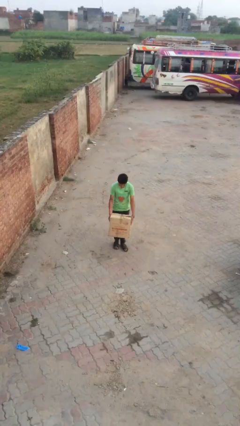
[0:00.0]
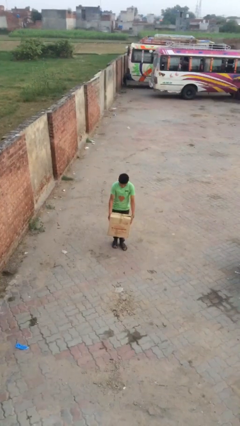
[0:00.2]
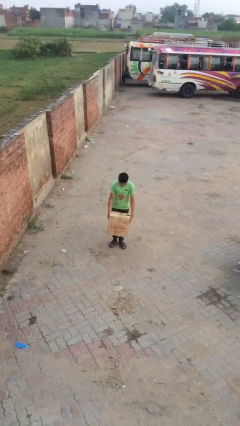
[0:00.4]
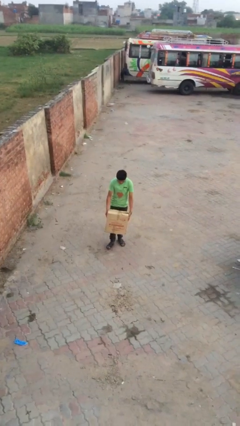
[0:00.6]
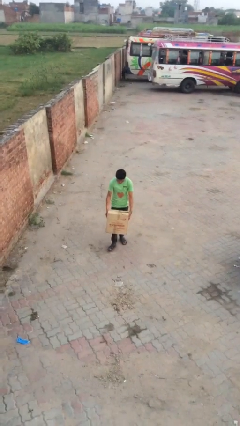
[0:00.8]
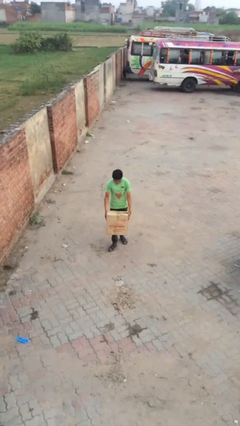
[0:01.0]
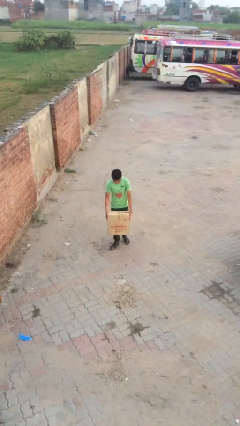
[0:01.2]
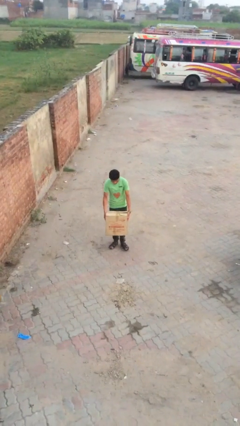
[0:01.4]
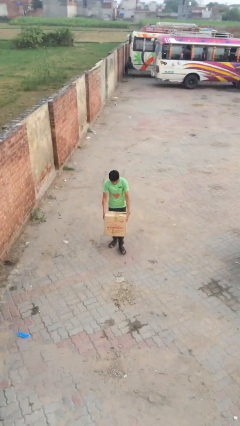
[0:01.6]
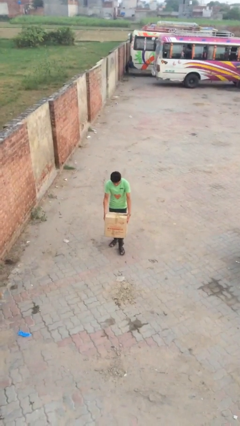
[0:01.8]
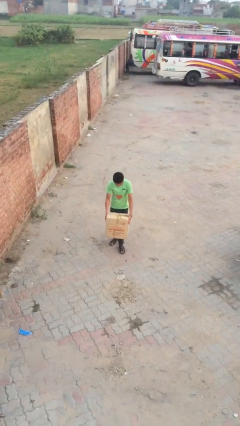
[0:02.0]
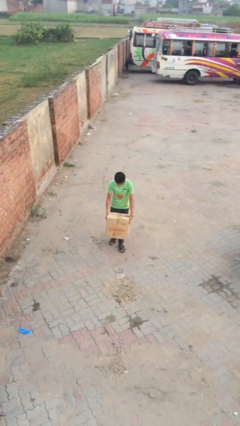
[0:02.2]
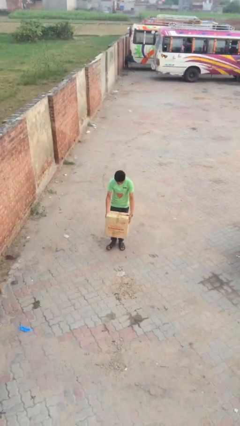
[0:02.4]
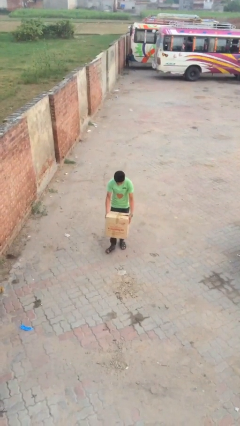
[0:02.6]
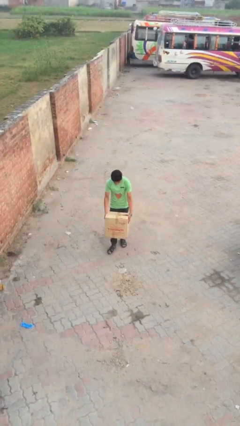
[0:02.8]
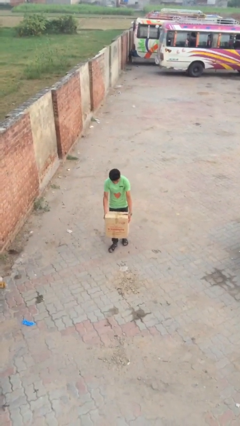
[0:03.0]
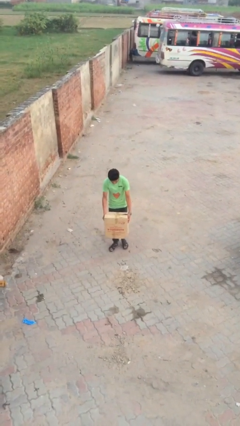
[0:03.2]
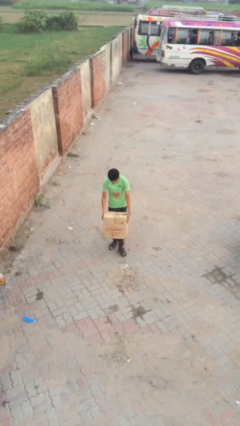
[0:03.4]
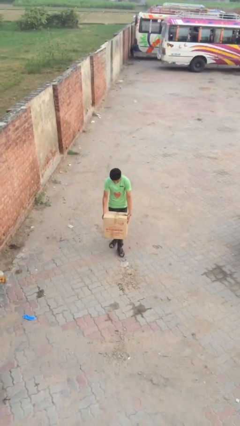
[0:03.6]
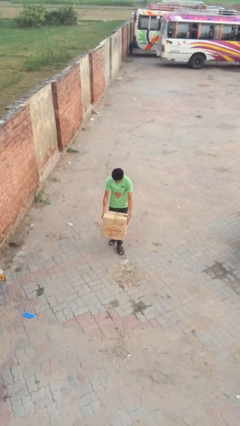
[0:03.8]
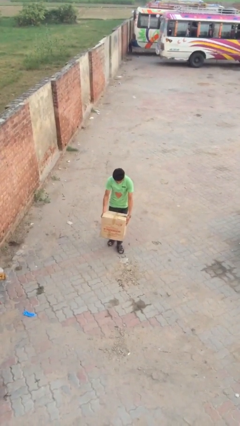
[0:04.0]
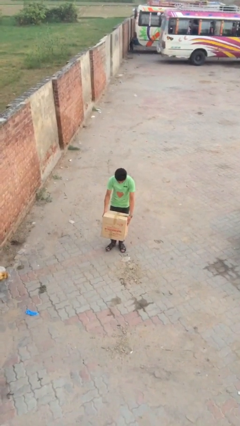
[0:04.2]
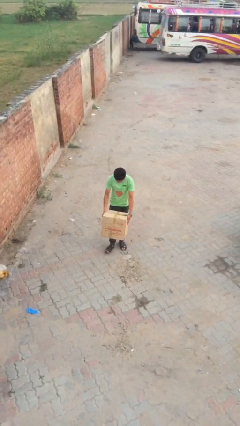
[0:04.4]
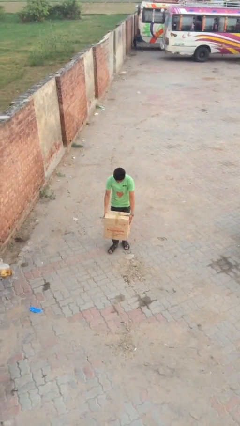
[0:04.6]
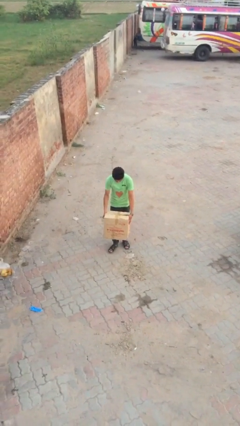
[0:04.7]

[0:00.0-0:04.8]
person carries heavy object

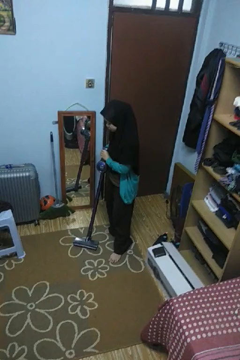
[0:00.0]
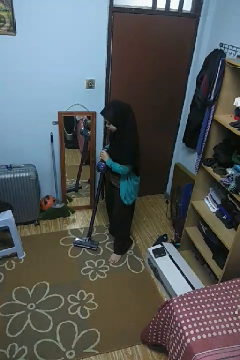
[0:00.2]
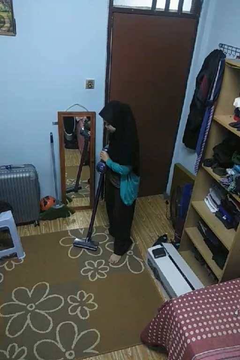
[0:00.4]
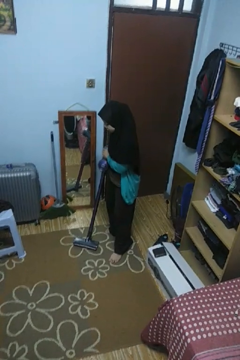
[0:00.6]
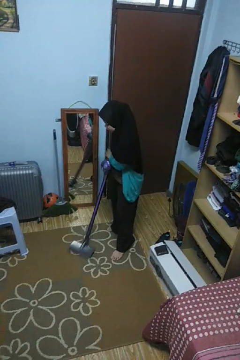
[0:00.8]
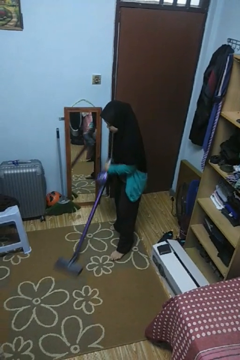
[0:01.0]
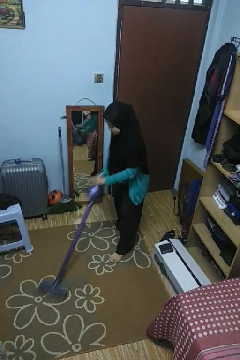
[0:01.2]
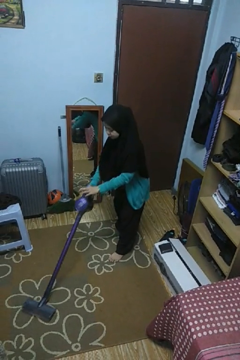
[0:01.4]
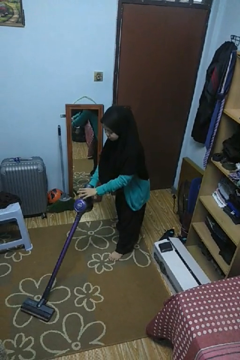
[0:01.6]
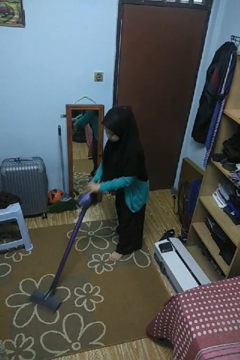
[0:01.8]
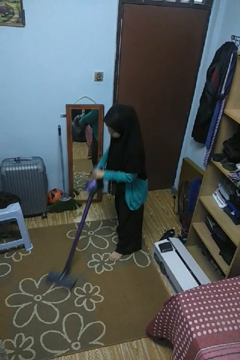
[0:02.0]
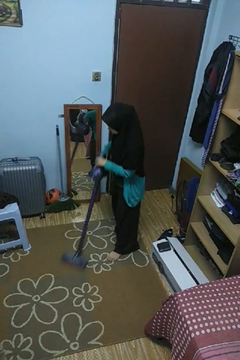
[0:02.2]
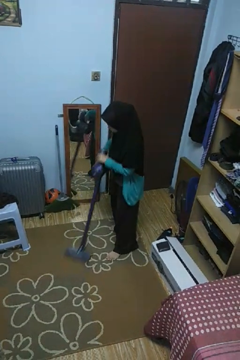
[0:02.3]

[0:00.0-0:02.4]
person vacuums carpet

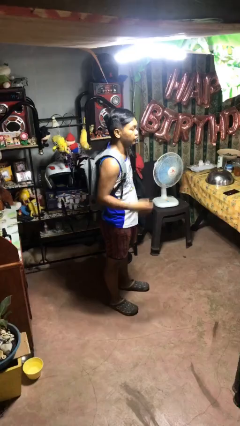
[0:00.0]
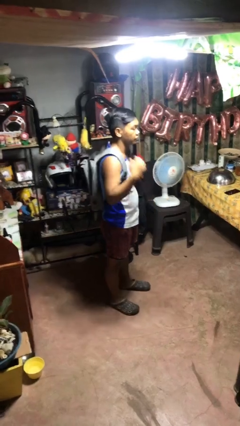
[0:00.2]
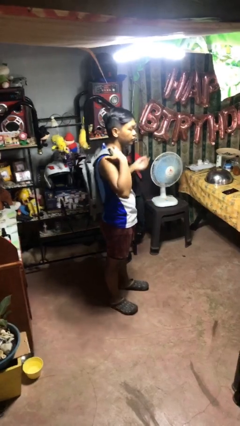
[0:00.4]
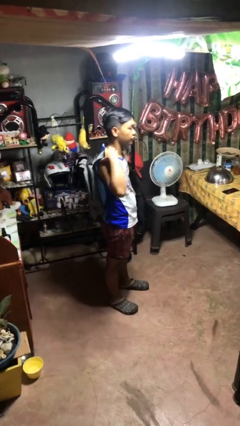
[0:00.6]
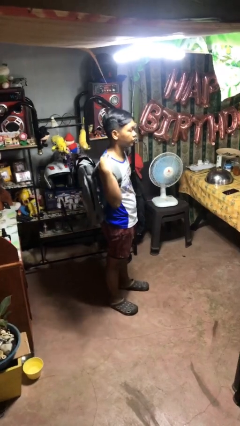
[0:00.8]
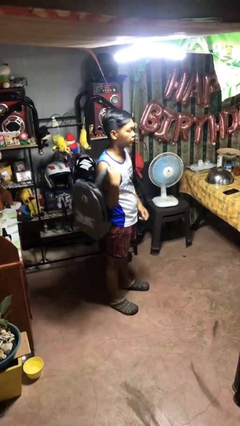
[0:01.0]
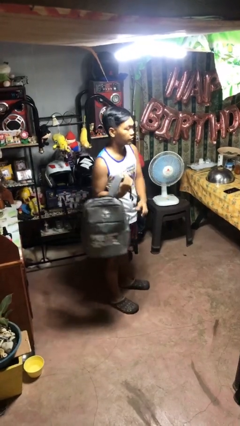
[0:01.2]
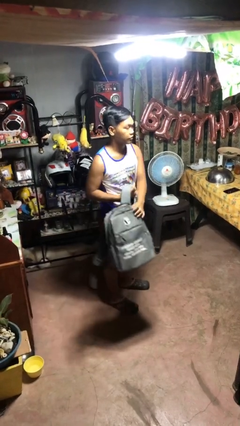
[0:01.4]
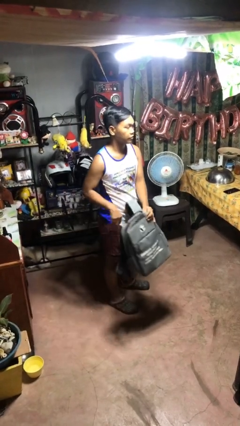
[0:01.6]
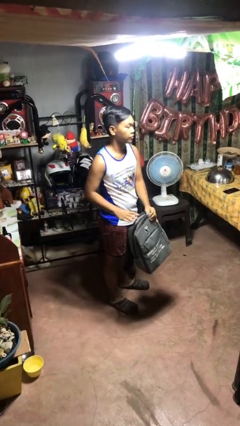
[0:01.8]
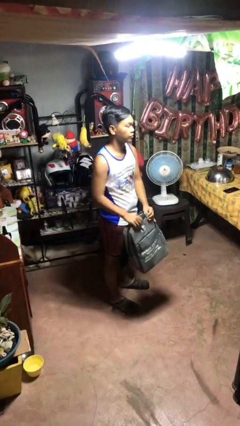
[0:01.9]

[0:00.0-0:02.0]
person takes off backpack

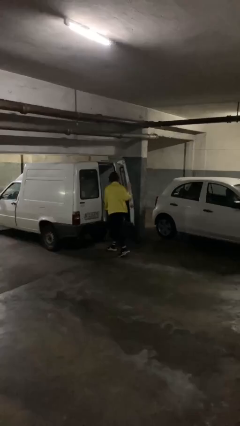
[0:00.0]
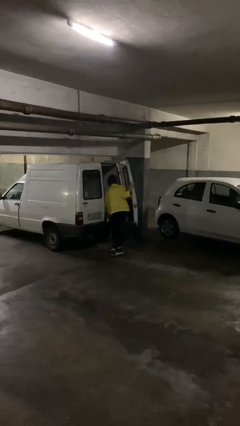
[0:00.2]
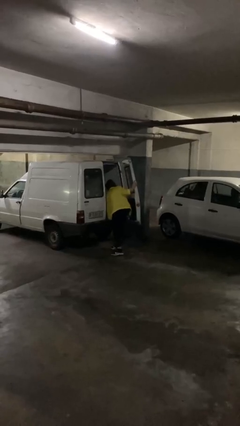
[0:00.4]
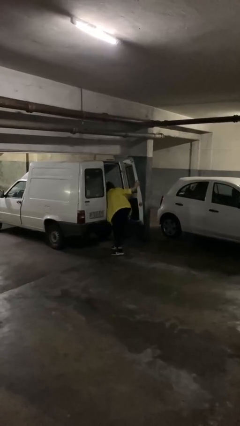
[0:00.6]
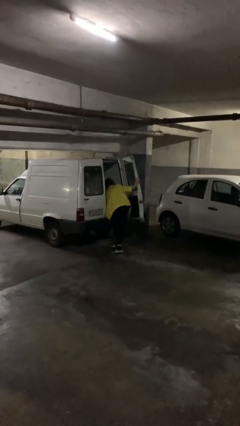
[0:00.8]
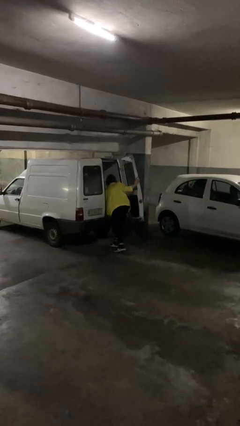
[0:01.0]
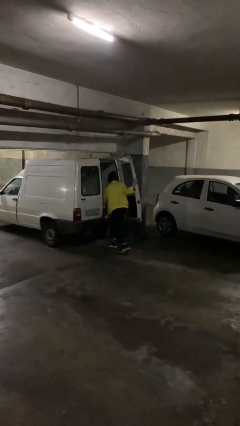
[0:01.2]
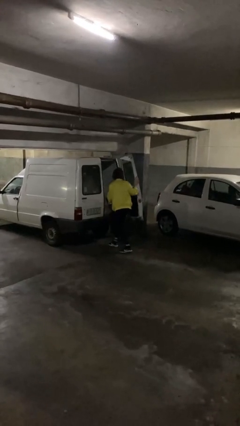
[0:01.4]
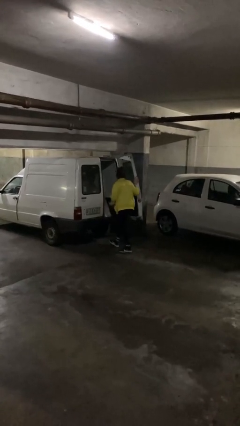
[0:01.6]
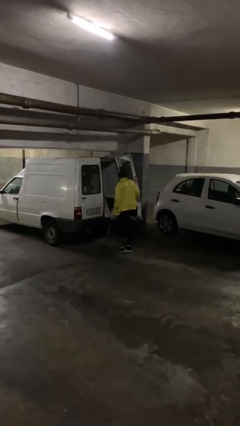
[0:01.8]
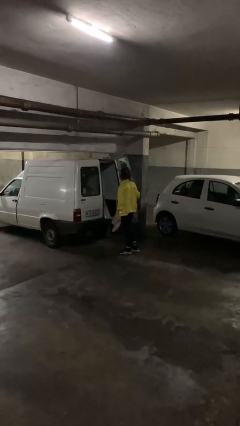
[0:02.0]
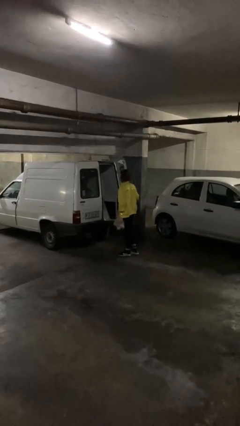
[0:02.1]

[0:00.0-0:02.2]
person unloads car

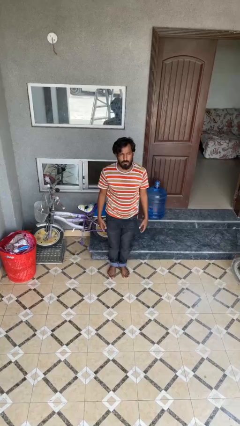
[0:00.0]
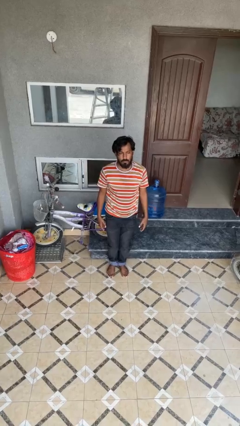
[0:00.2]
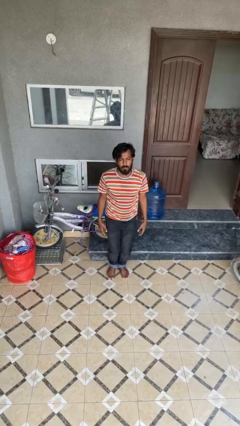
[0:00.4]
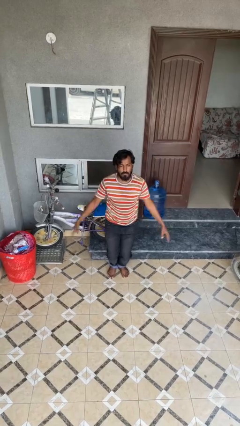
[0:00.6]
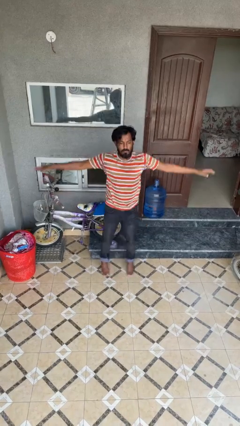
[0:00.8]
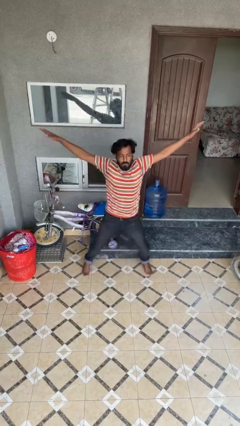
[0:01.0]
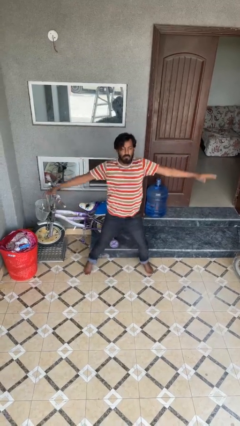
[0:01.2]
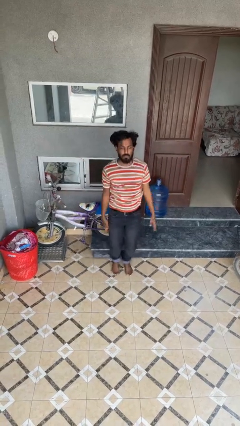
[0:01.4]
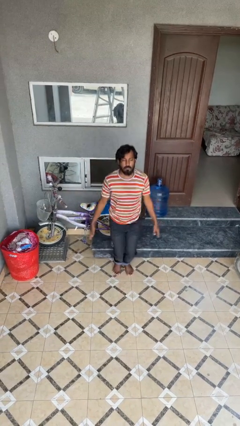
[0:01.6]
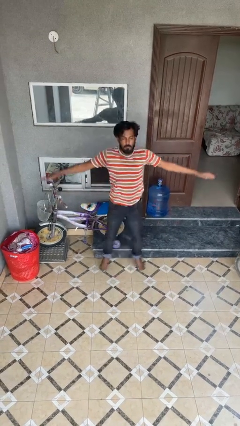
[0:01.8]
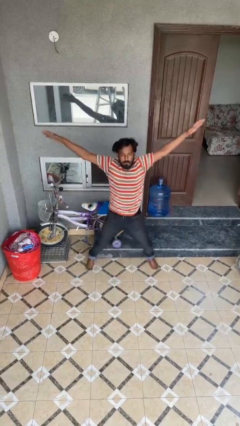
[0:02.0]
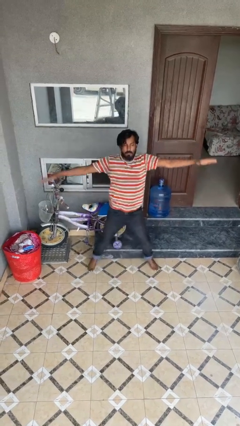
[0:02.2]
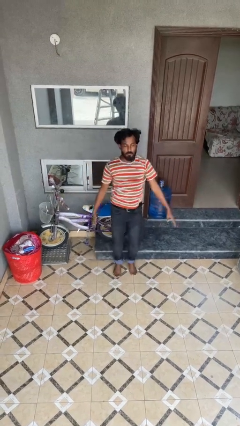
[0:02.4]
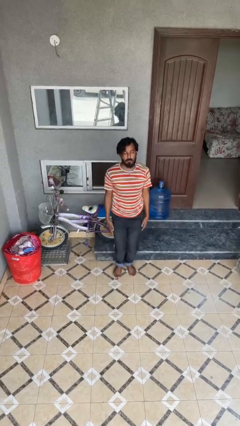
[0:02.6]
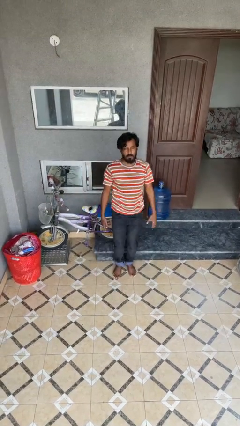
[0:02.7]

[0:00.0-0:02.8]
person exercises with jumping jacks

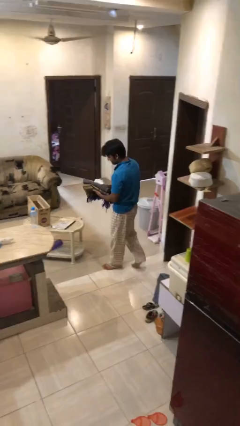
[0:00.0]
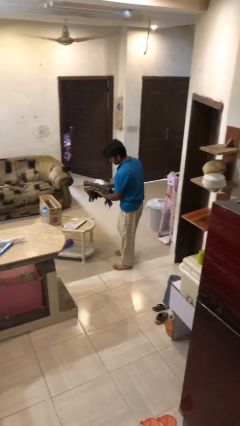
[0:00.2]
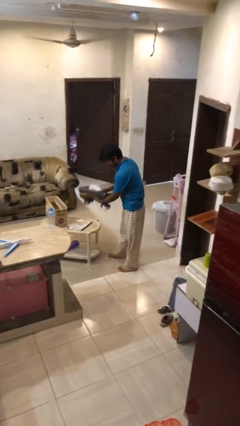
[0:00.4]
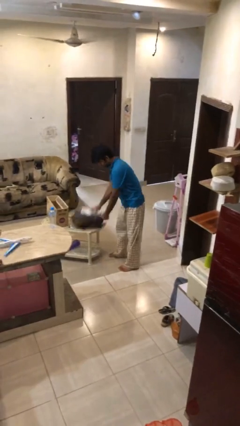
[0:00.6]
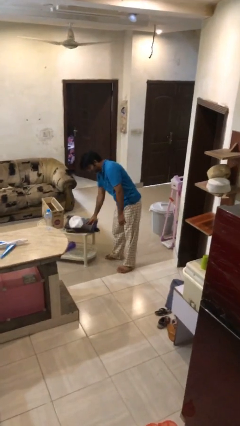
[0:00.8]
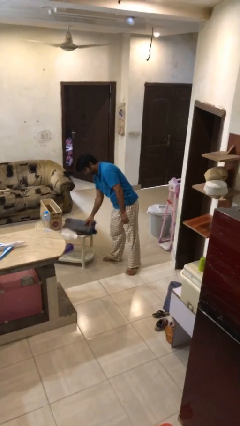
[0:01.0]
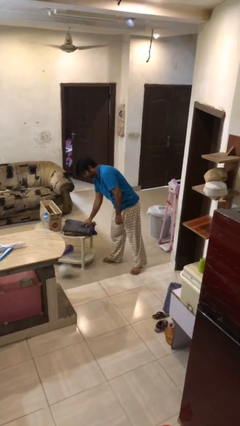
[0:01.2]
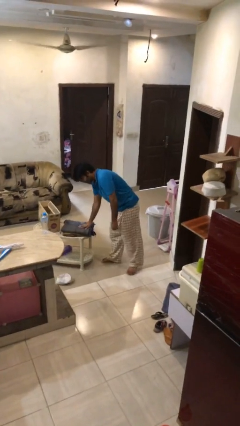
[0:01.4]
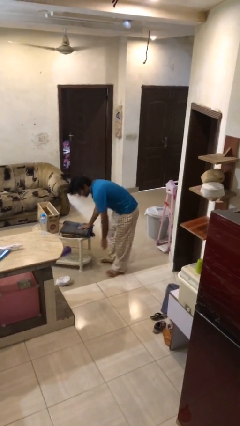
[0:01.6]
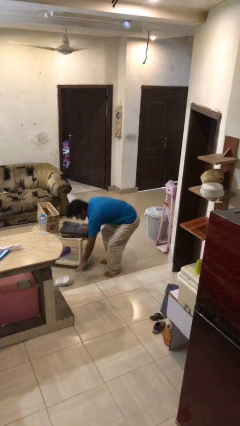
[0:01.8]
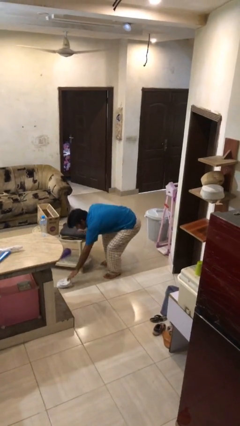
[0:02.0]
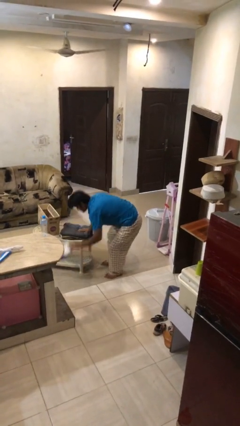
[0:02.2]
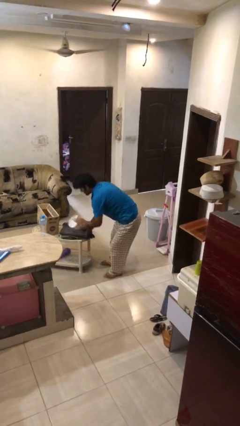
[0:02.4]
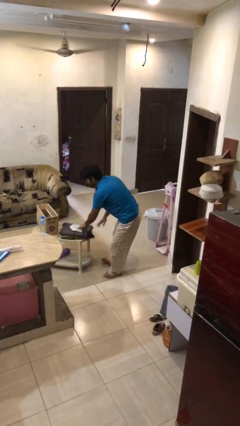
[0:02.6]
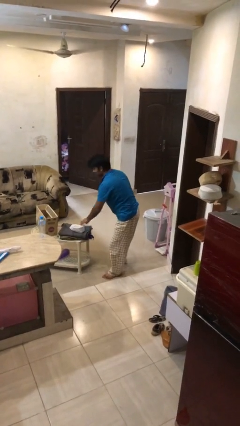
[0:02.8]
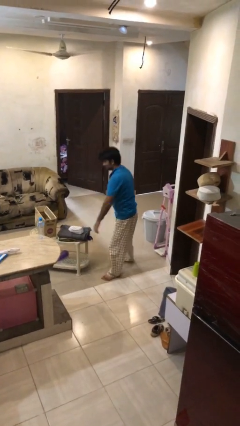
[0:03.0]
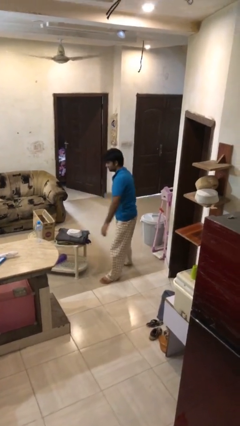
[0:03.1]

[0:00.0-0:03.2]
person puts down object on table

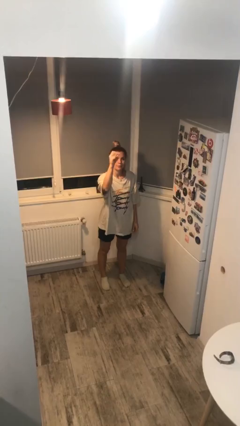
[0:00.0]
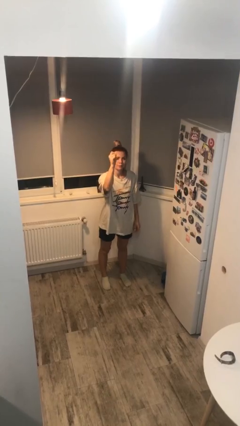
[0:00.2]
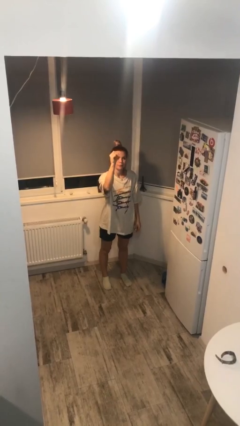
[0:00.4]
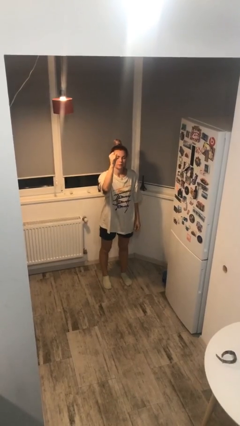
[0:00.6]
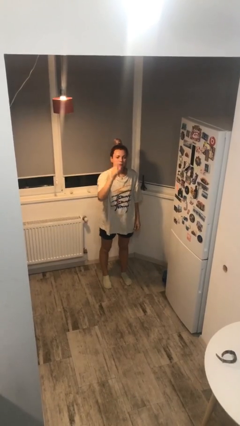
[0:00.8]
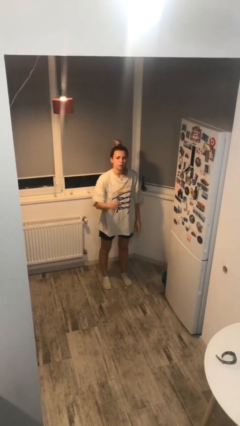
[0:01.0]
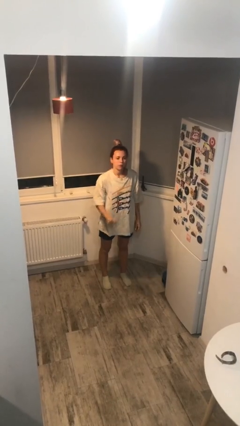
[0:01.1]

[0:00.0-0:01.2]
person snaps fingers
